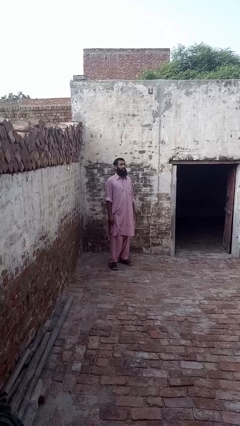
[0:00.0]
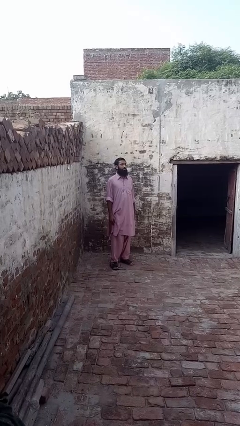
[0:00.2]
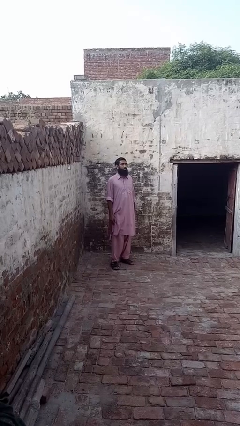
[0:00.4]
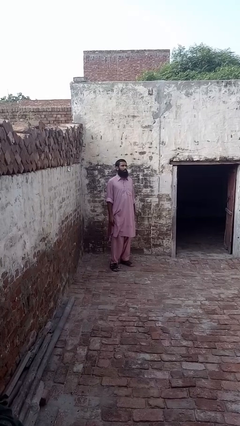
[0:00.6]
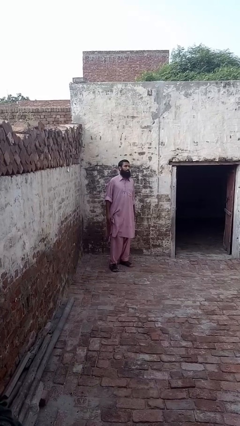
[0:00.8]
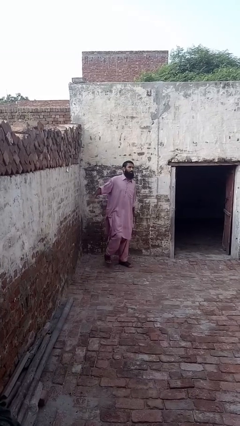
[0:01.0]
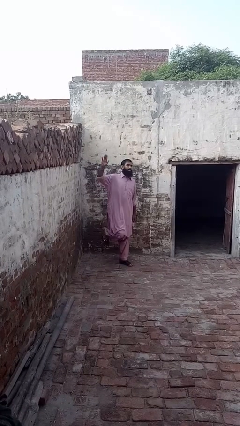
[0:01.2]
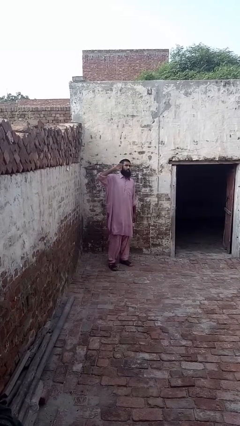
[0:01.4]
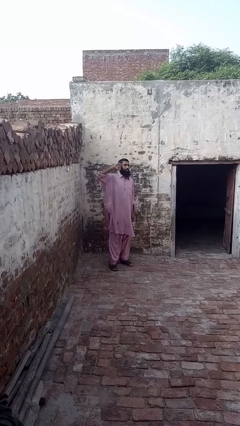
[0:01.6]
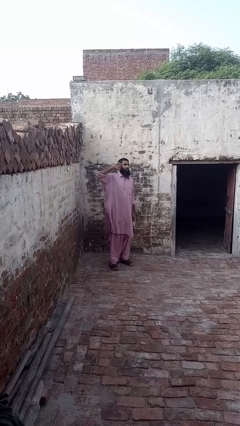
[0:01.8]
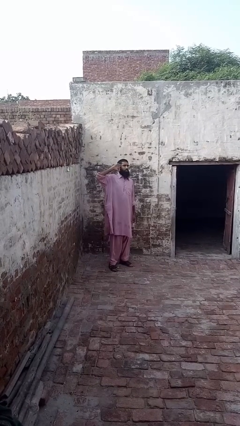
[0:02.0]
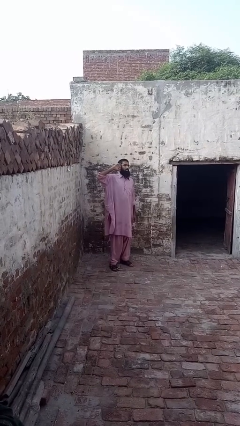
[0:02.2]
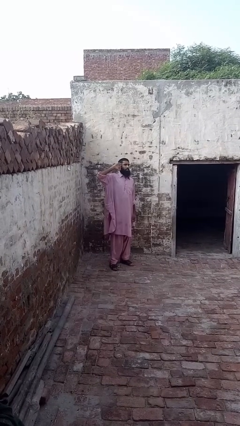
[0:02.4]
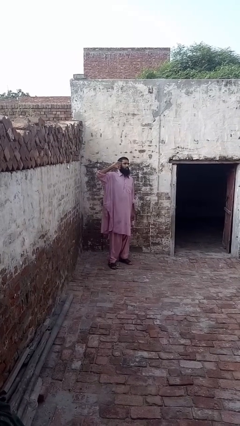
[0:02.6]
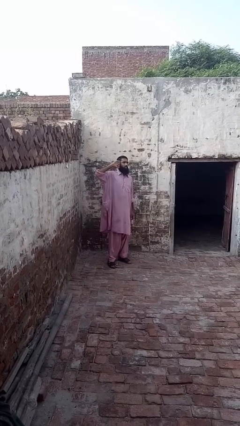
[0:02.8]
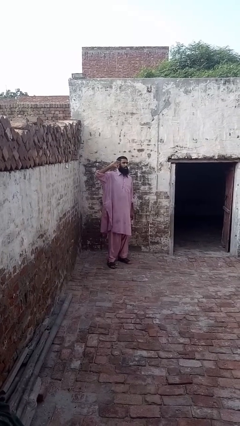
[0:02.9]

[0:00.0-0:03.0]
person salutes

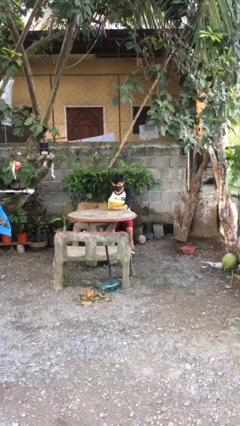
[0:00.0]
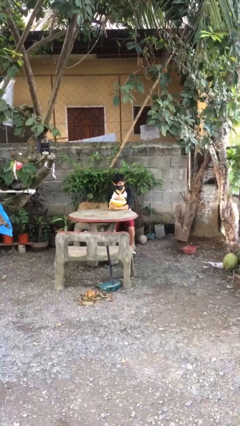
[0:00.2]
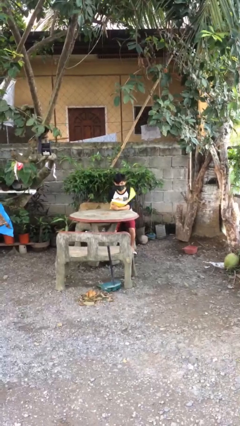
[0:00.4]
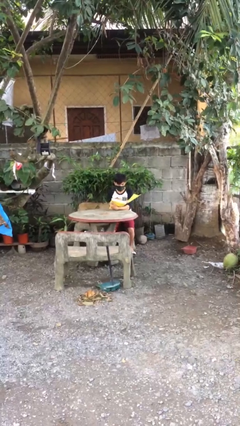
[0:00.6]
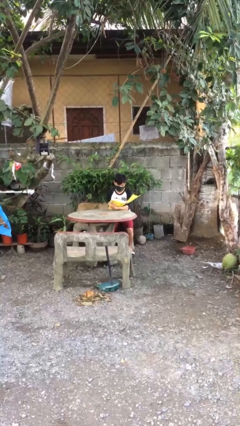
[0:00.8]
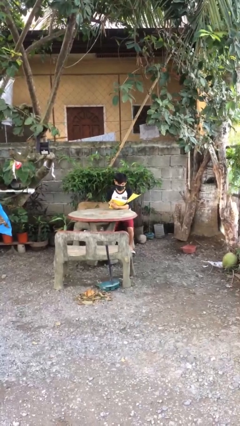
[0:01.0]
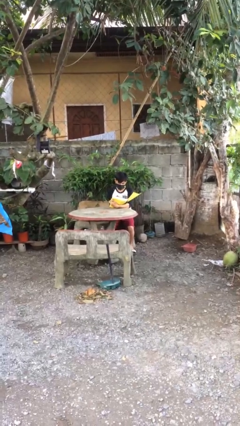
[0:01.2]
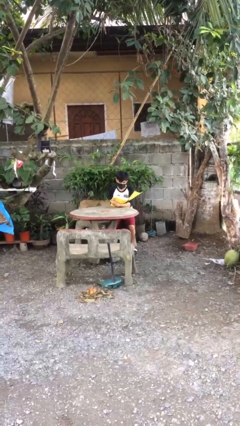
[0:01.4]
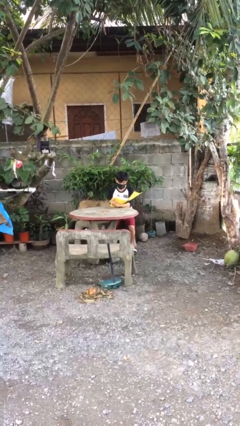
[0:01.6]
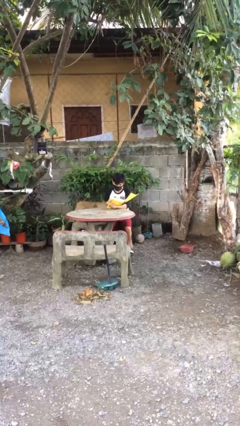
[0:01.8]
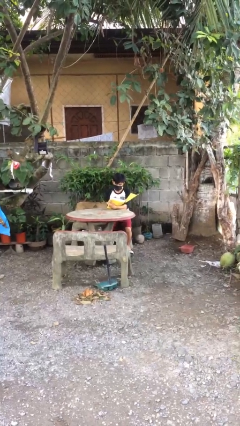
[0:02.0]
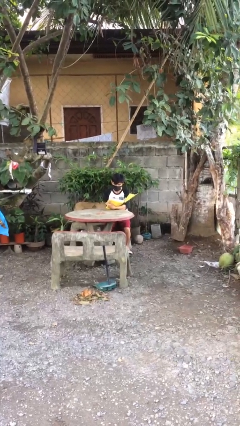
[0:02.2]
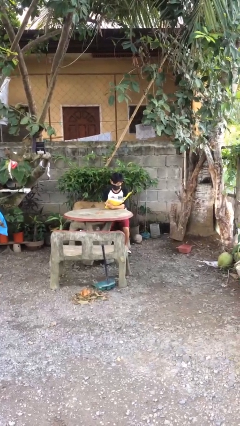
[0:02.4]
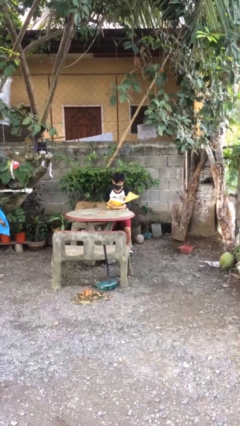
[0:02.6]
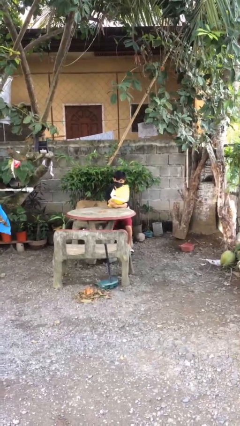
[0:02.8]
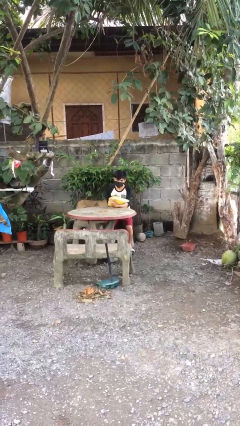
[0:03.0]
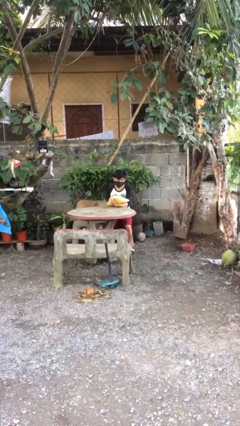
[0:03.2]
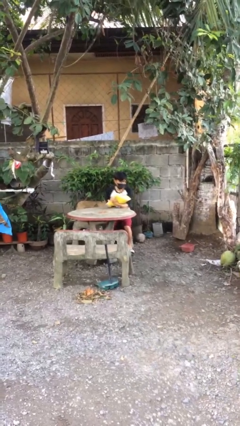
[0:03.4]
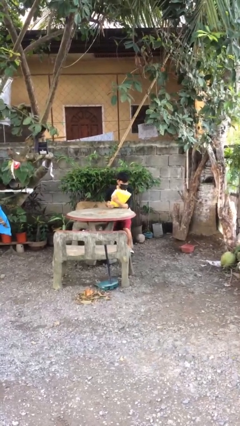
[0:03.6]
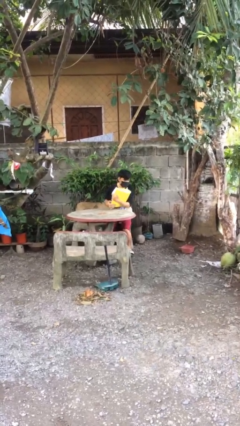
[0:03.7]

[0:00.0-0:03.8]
person reads document

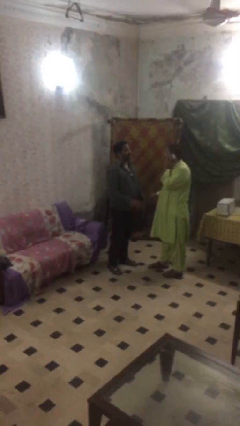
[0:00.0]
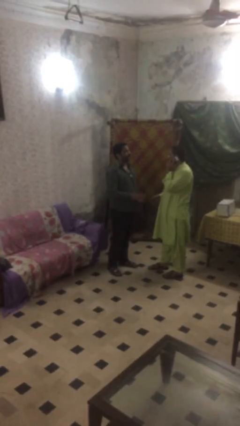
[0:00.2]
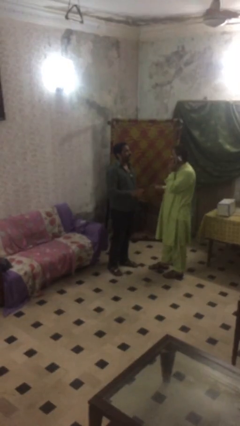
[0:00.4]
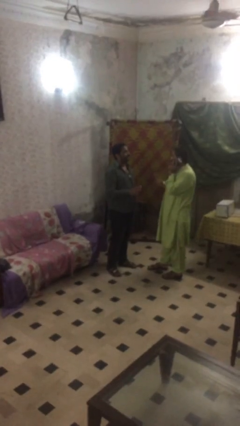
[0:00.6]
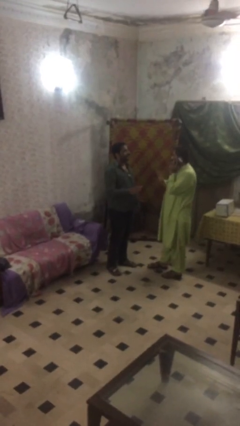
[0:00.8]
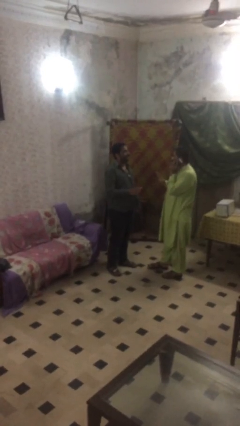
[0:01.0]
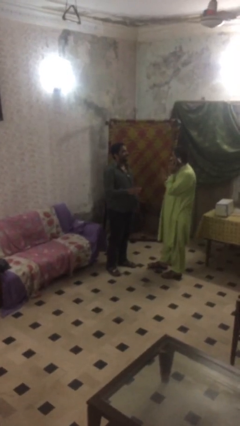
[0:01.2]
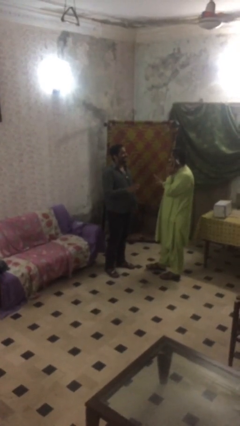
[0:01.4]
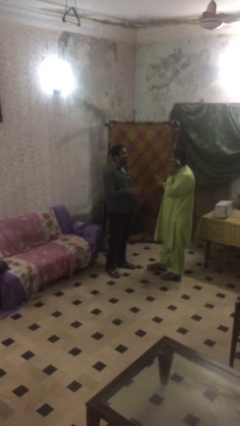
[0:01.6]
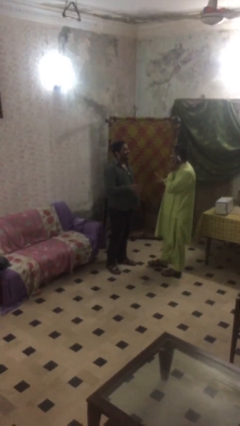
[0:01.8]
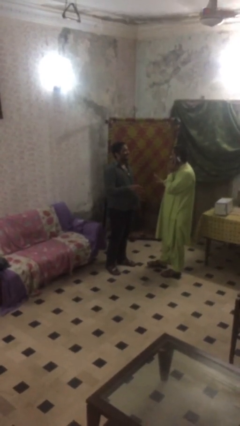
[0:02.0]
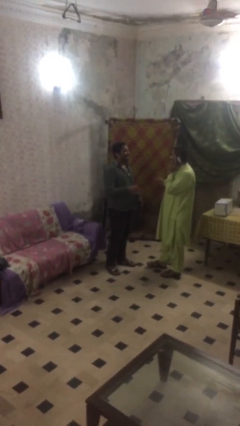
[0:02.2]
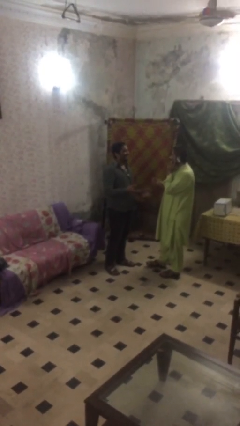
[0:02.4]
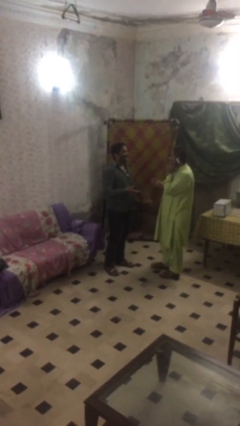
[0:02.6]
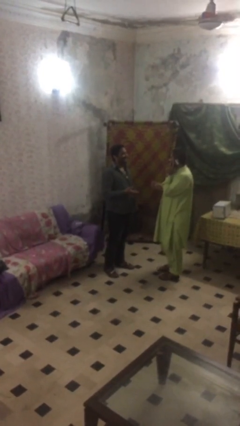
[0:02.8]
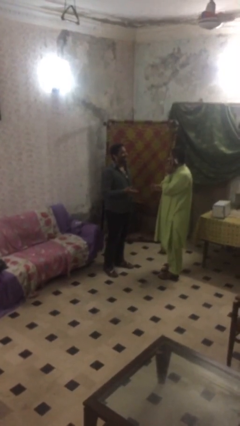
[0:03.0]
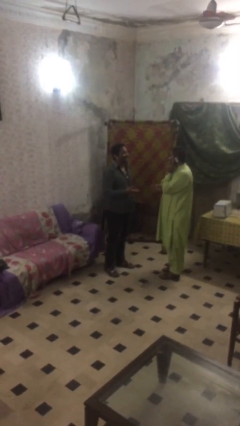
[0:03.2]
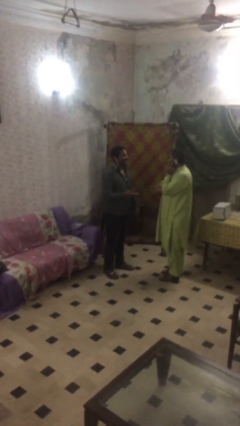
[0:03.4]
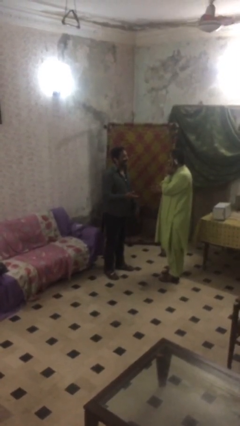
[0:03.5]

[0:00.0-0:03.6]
person talks to person

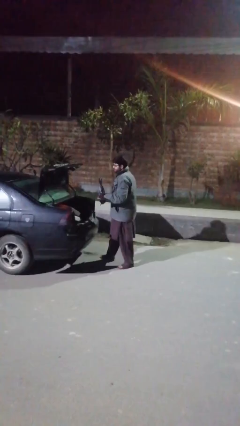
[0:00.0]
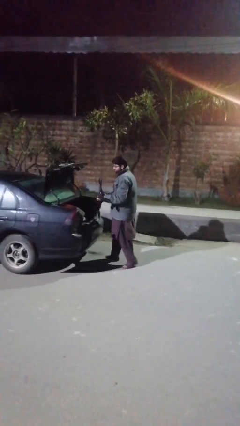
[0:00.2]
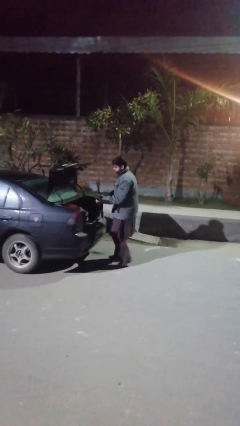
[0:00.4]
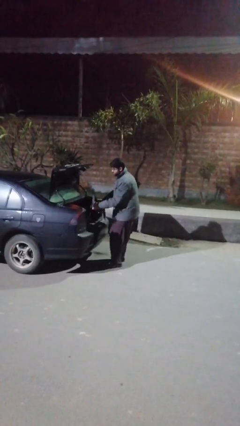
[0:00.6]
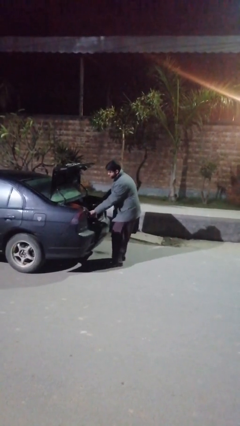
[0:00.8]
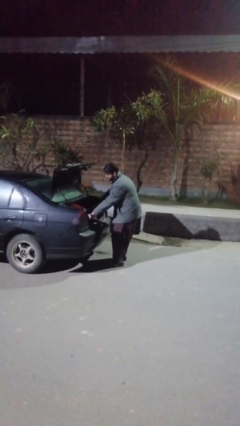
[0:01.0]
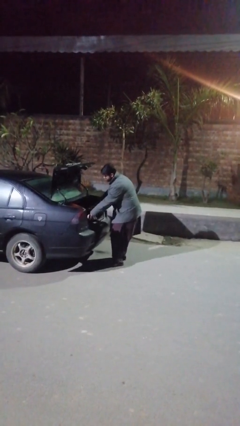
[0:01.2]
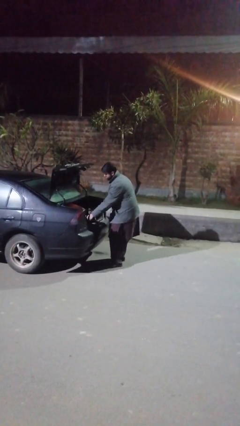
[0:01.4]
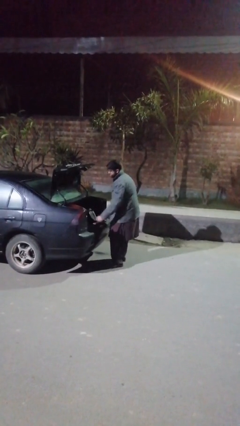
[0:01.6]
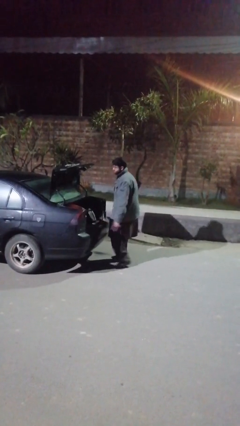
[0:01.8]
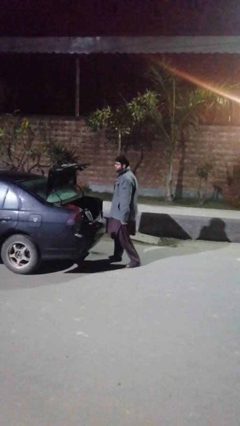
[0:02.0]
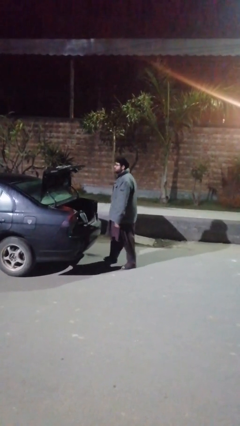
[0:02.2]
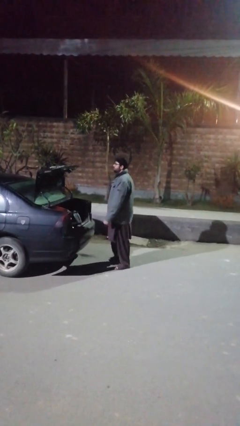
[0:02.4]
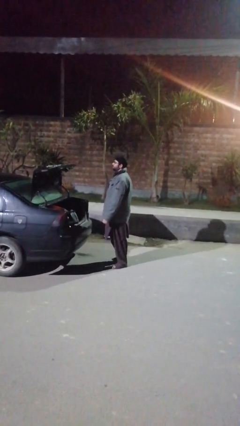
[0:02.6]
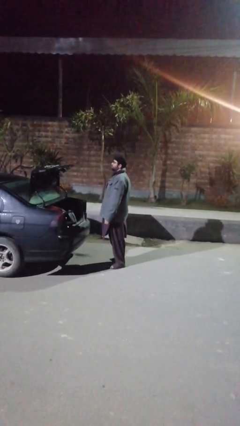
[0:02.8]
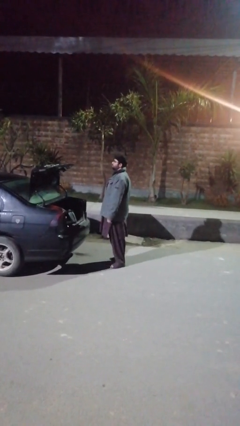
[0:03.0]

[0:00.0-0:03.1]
person loads car

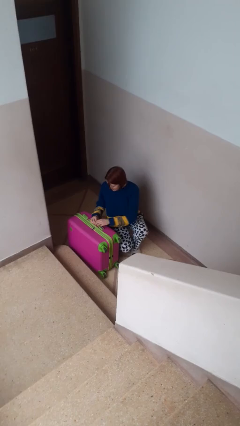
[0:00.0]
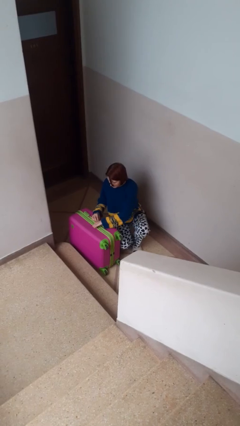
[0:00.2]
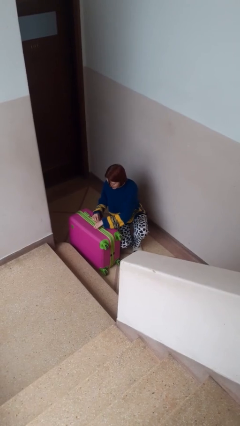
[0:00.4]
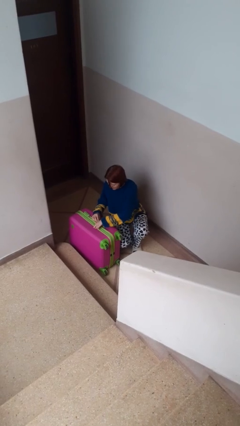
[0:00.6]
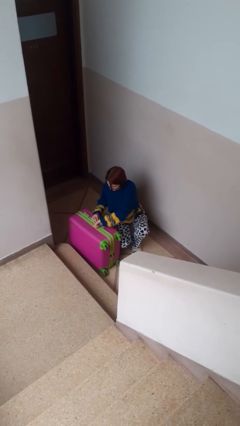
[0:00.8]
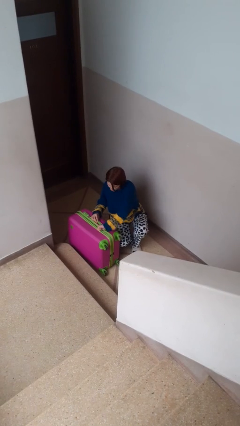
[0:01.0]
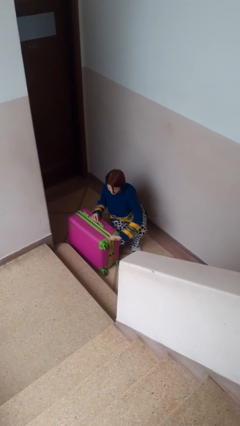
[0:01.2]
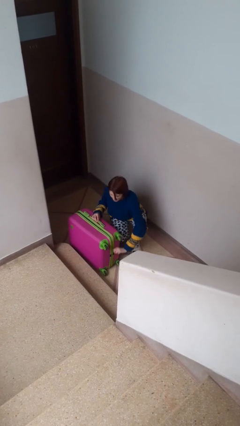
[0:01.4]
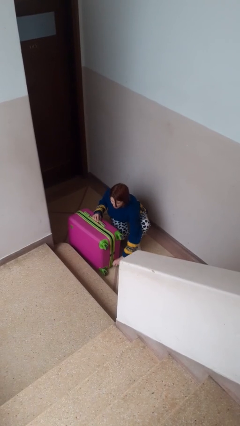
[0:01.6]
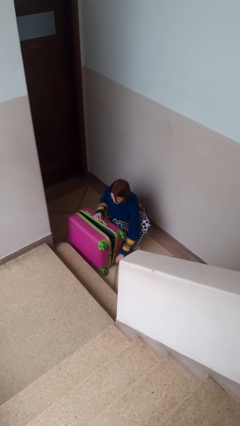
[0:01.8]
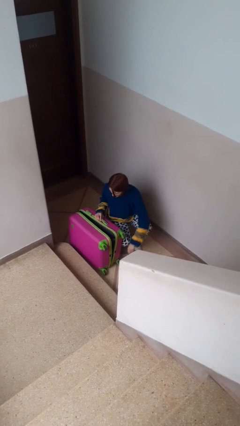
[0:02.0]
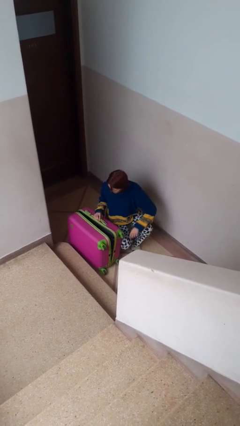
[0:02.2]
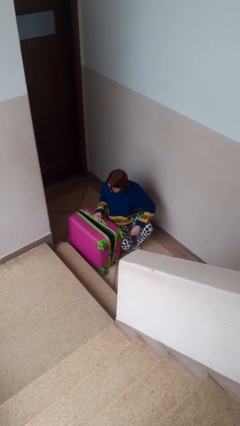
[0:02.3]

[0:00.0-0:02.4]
person opens suitcase

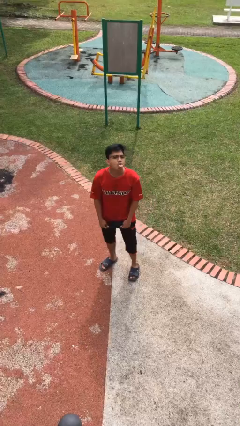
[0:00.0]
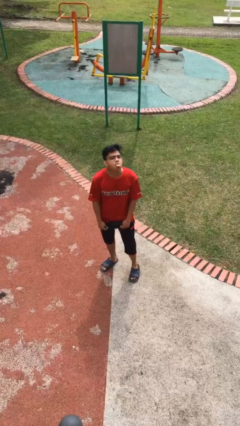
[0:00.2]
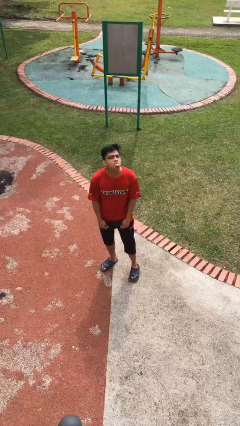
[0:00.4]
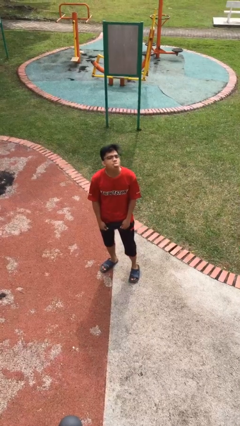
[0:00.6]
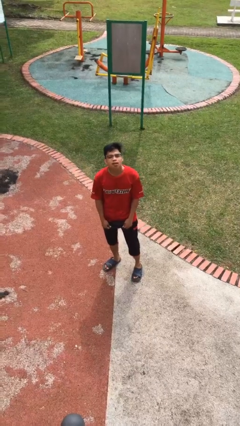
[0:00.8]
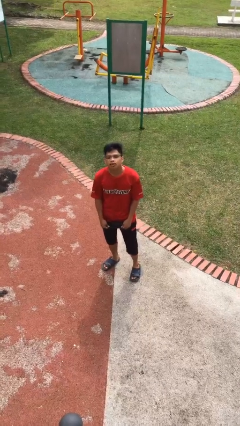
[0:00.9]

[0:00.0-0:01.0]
person sticks out tongue

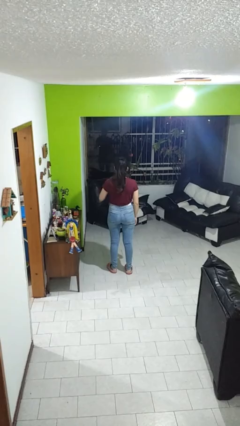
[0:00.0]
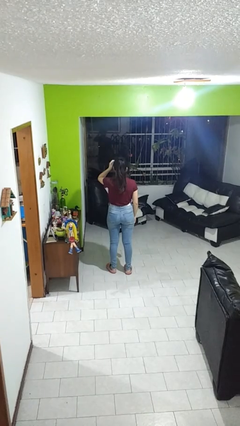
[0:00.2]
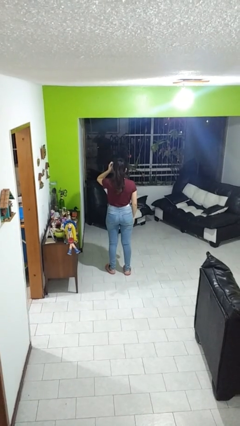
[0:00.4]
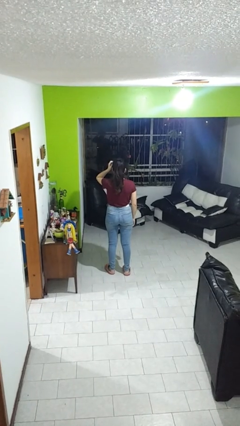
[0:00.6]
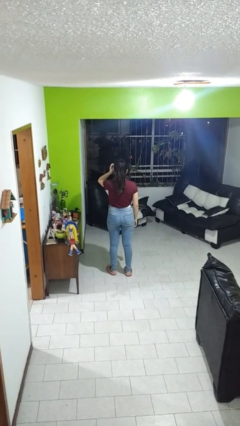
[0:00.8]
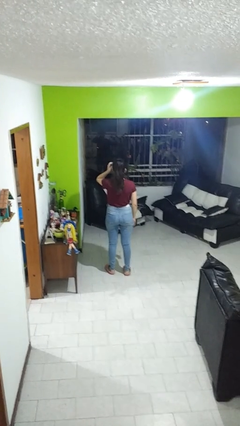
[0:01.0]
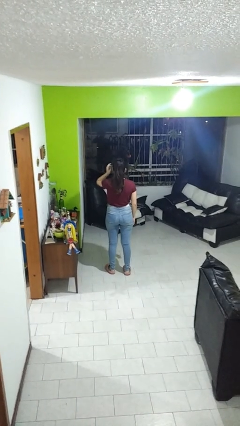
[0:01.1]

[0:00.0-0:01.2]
person scratches face
